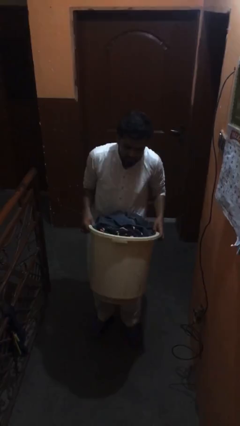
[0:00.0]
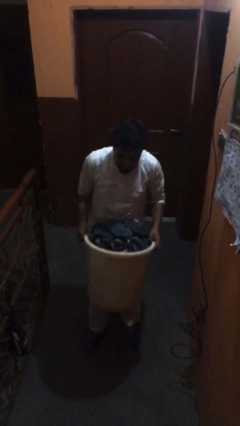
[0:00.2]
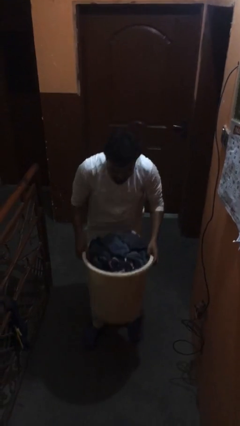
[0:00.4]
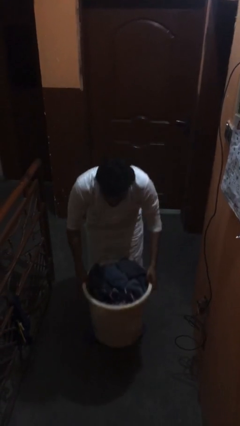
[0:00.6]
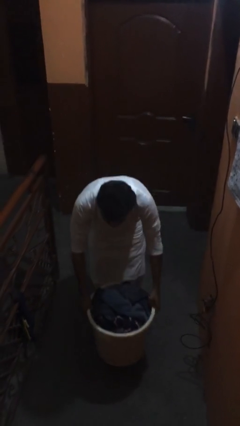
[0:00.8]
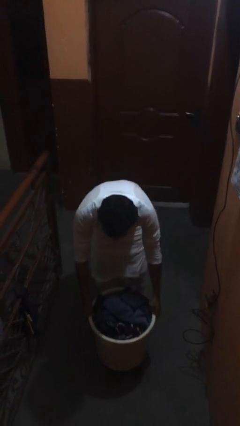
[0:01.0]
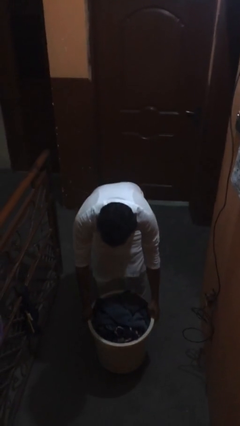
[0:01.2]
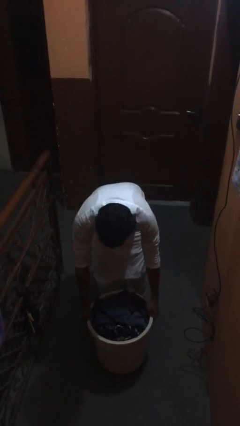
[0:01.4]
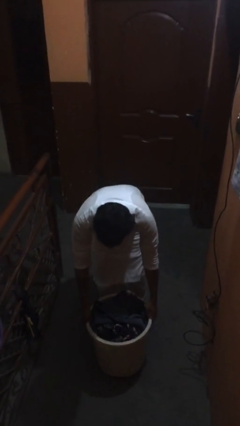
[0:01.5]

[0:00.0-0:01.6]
person puts down object on floor

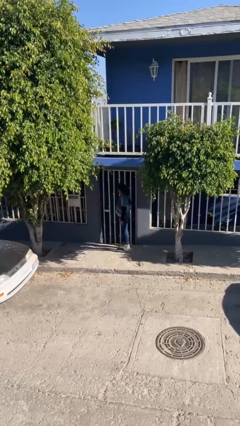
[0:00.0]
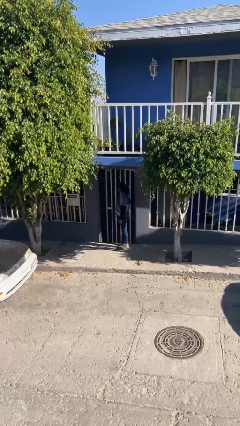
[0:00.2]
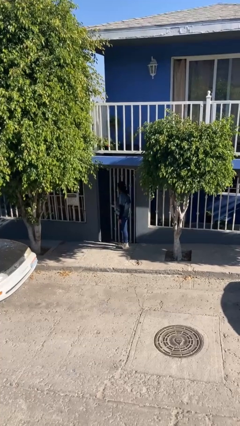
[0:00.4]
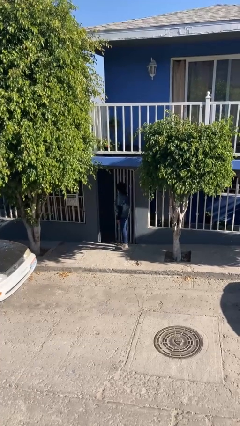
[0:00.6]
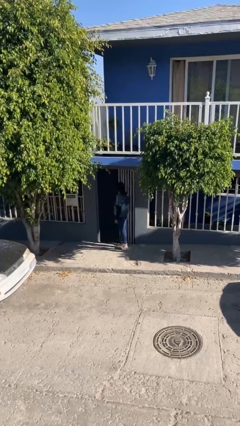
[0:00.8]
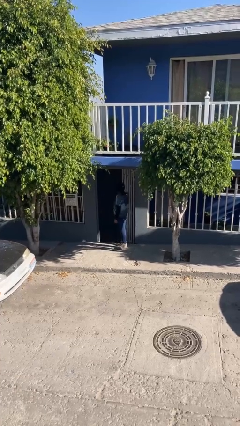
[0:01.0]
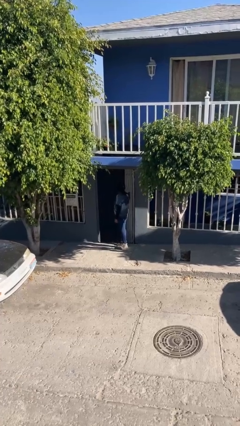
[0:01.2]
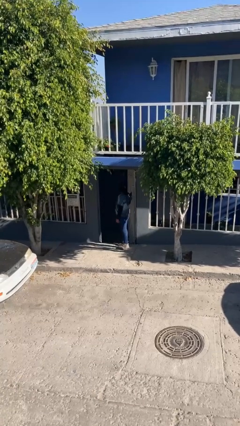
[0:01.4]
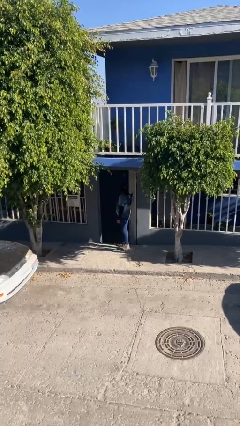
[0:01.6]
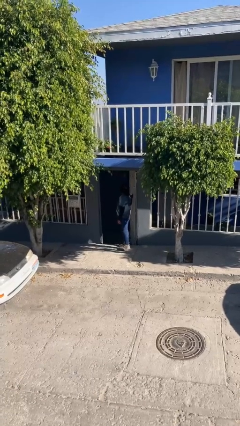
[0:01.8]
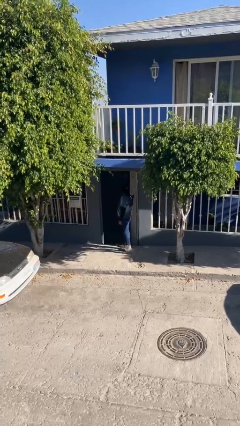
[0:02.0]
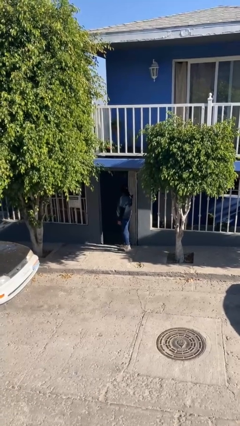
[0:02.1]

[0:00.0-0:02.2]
person opens facility door

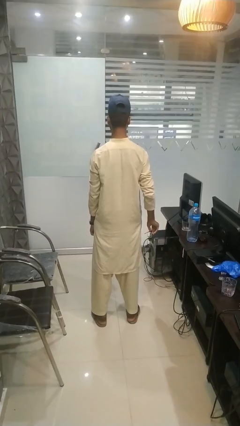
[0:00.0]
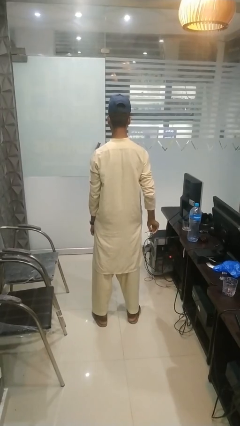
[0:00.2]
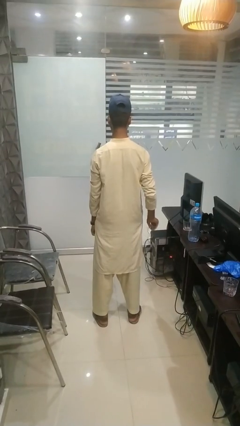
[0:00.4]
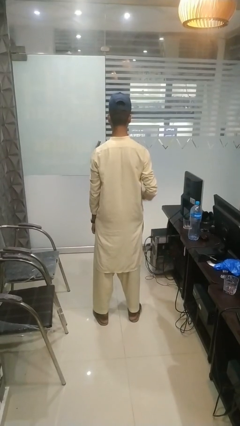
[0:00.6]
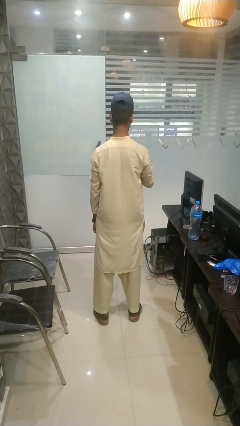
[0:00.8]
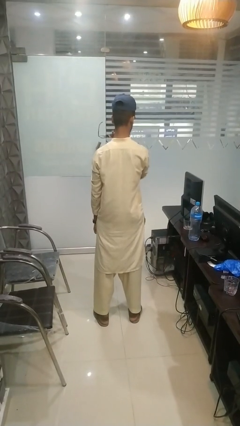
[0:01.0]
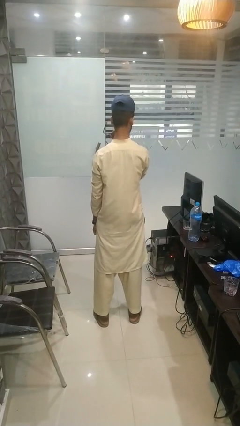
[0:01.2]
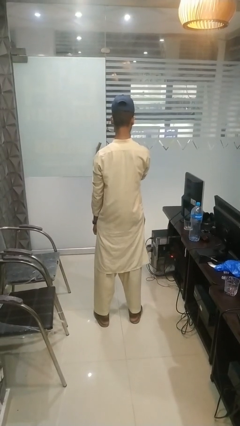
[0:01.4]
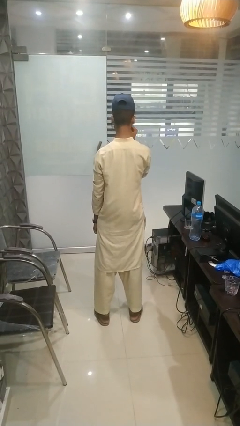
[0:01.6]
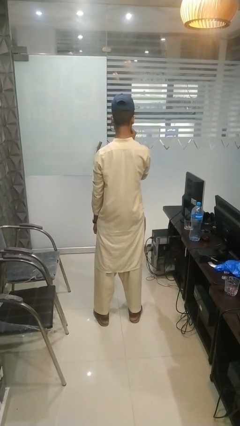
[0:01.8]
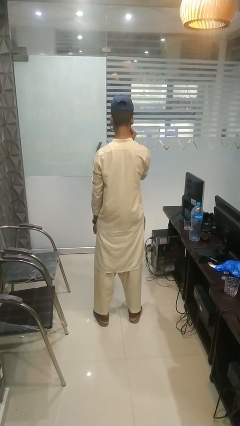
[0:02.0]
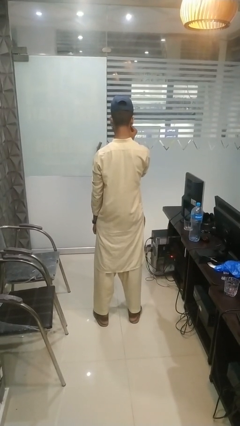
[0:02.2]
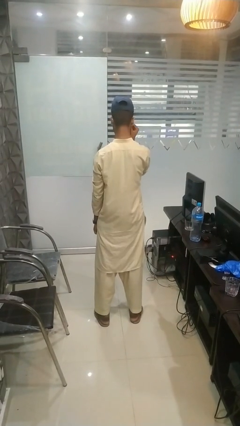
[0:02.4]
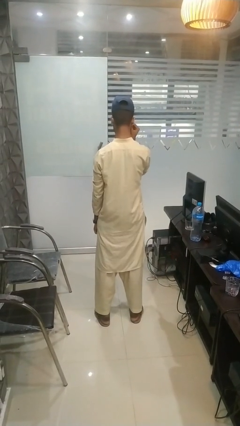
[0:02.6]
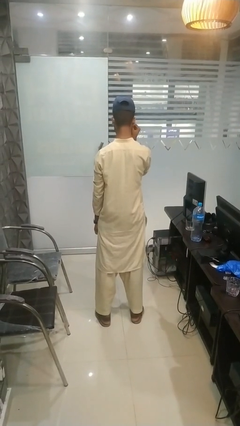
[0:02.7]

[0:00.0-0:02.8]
person puts on glasses

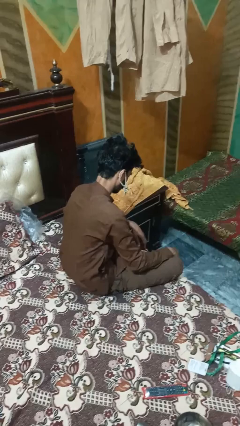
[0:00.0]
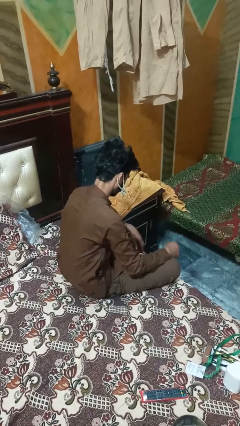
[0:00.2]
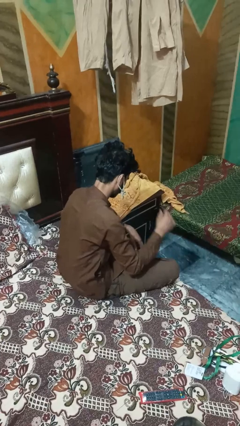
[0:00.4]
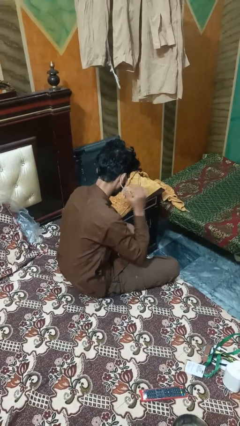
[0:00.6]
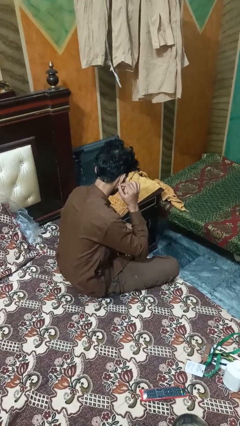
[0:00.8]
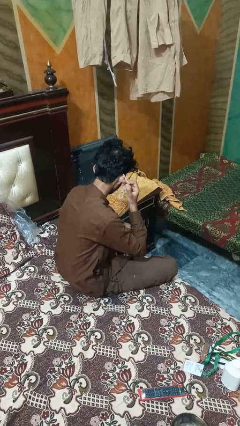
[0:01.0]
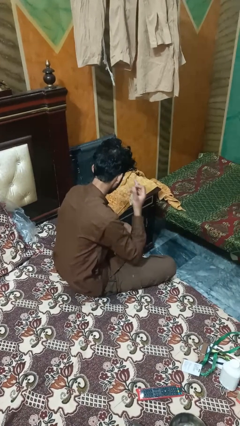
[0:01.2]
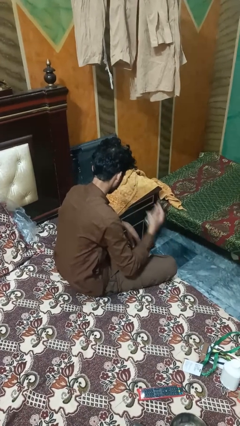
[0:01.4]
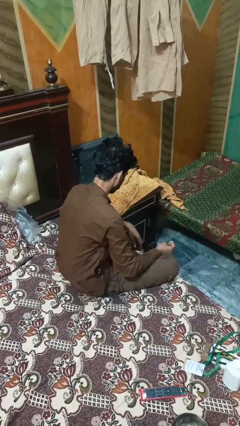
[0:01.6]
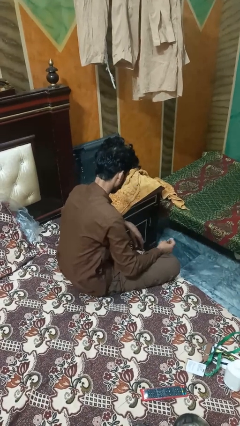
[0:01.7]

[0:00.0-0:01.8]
person takes off earrings

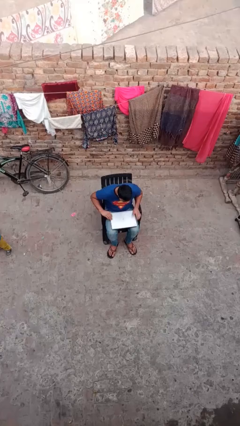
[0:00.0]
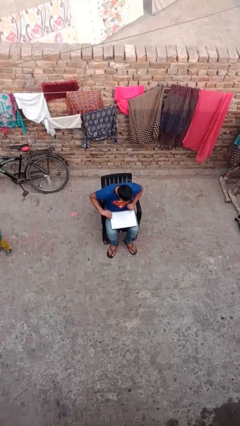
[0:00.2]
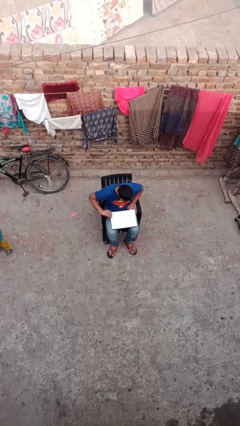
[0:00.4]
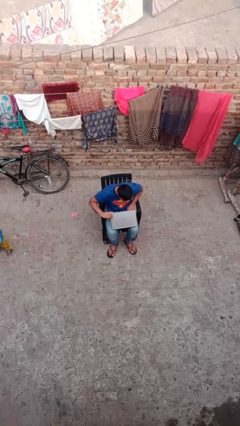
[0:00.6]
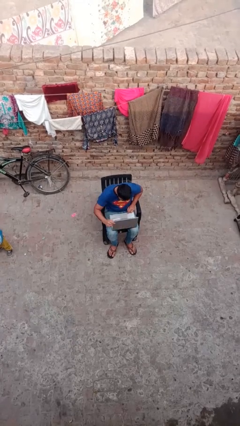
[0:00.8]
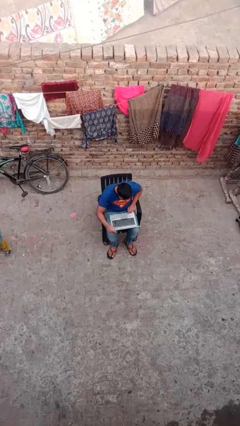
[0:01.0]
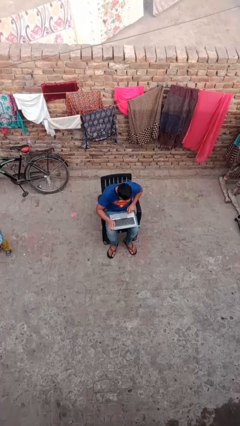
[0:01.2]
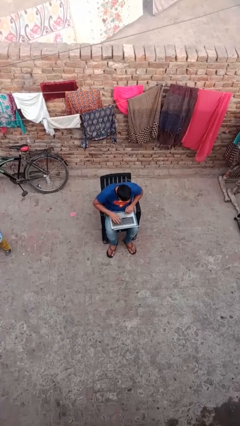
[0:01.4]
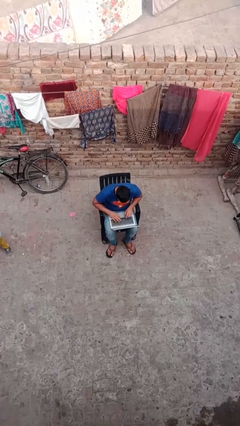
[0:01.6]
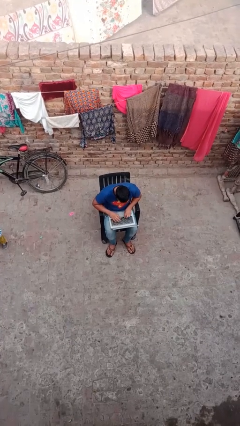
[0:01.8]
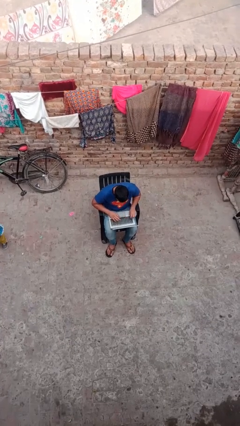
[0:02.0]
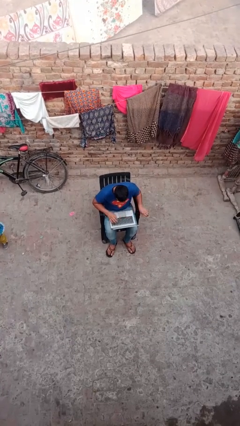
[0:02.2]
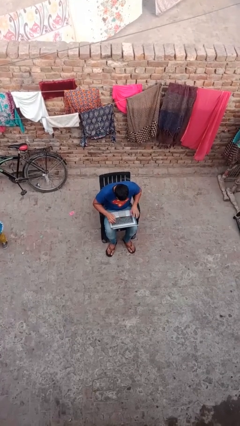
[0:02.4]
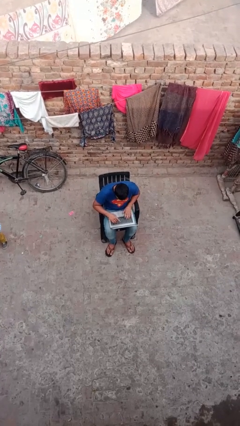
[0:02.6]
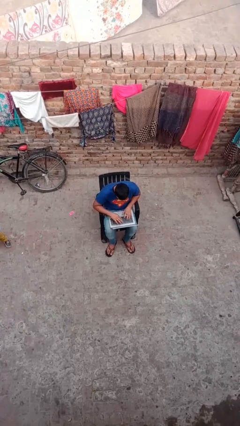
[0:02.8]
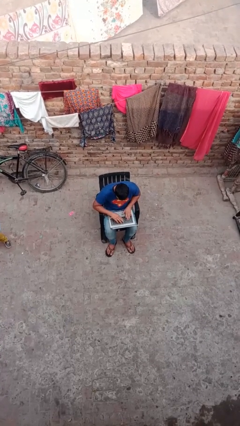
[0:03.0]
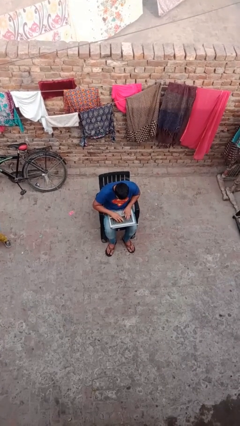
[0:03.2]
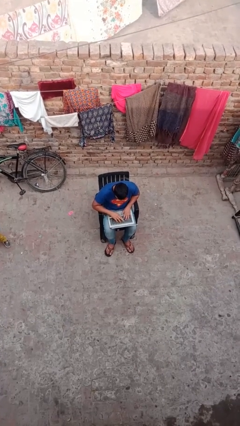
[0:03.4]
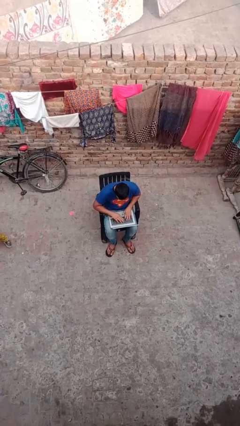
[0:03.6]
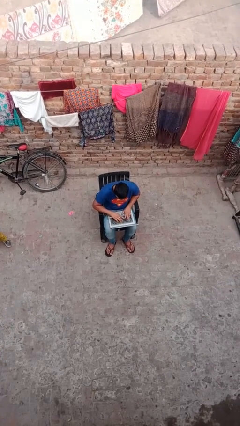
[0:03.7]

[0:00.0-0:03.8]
person interacts with laptop

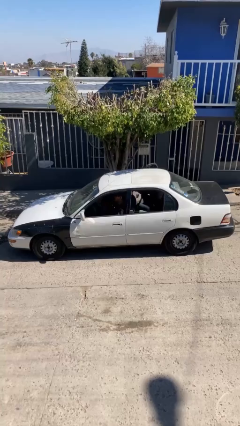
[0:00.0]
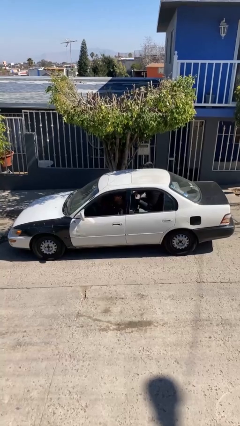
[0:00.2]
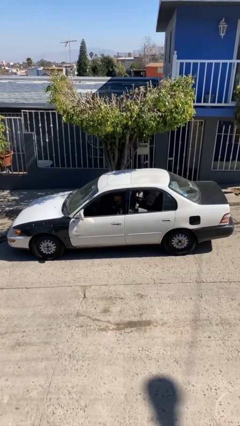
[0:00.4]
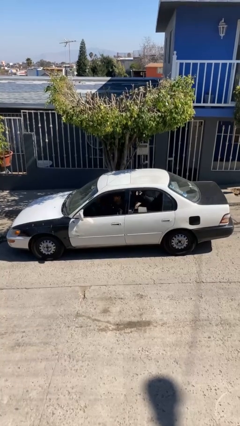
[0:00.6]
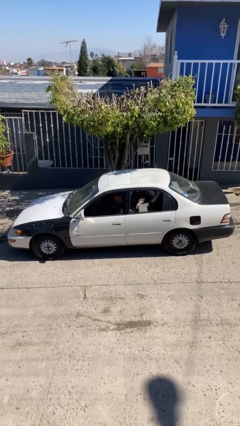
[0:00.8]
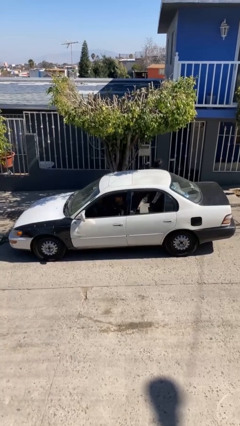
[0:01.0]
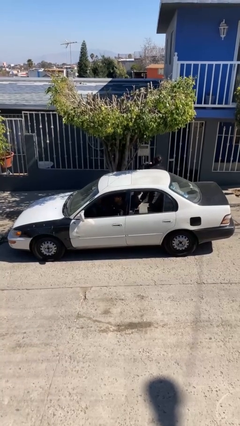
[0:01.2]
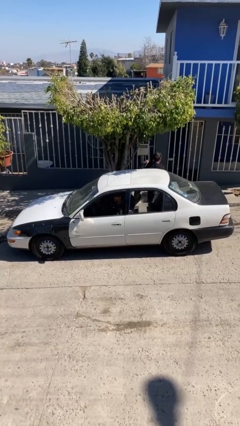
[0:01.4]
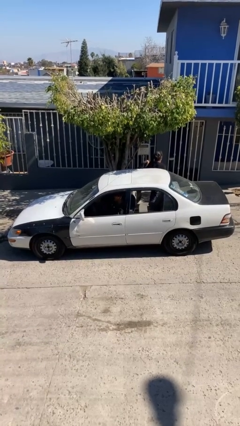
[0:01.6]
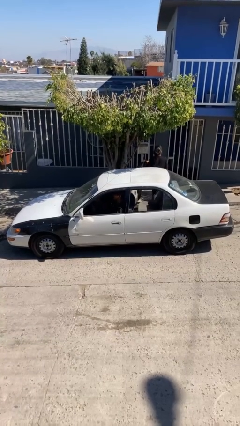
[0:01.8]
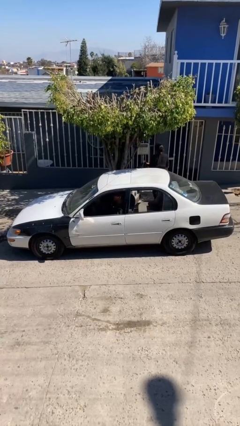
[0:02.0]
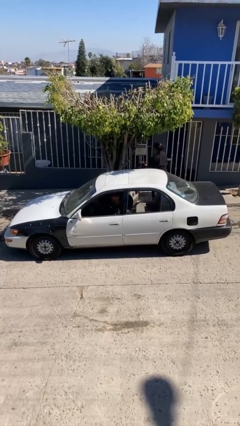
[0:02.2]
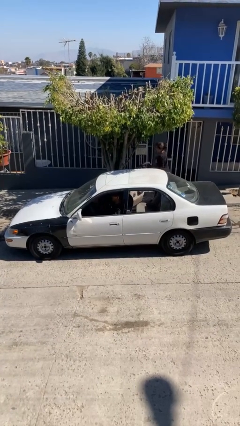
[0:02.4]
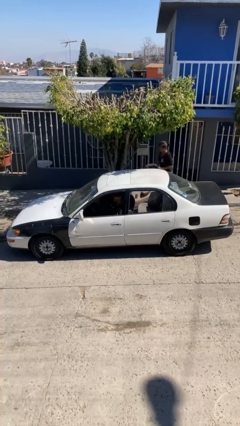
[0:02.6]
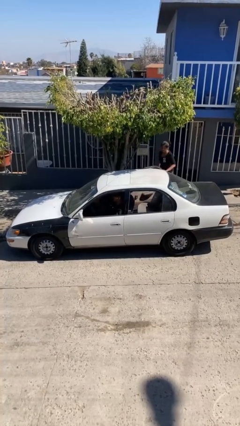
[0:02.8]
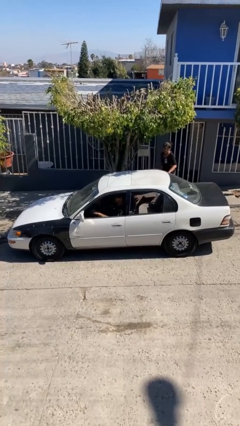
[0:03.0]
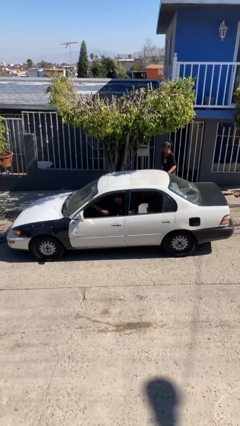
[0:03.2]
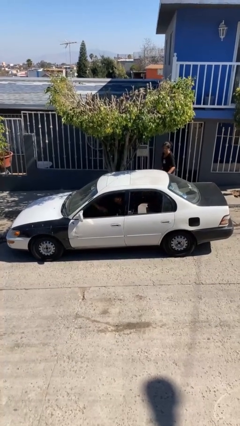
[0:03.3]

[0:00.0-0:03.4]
car drops off person

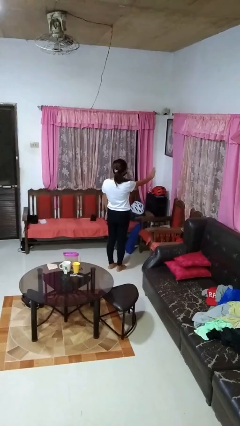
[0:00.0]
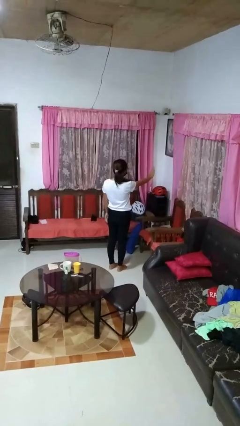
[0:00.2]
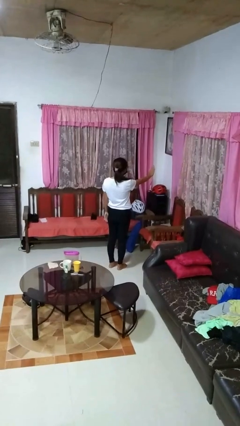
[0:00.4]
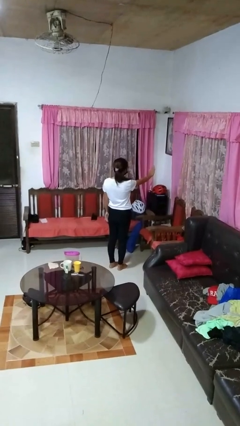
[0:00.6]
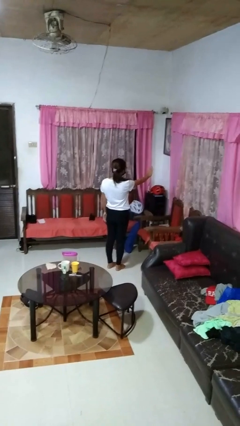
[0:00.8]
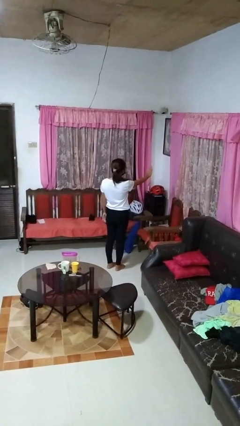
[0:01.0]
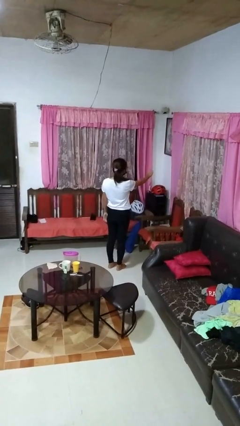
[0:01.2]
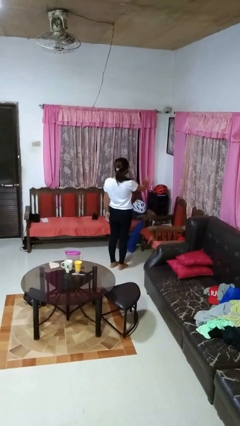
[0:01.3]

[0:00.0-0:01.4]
person gestures stop
